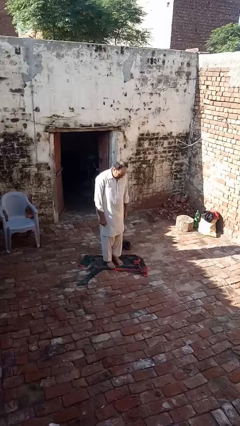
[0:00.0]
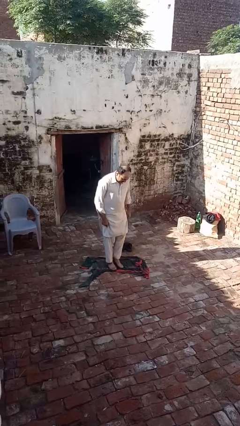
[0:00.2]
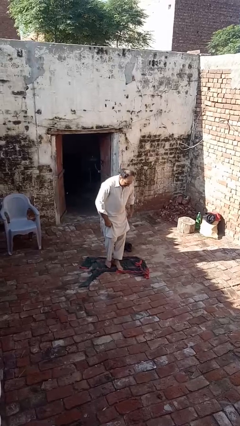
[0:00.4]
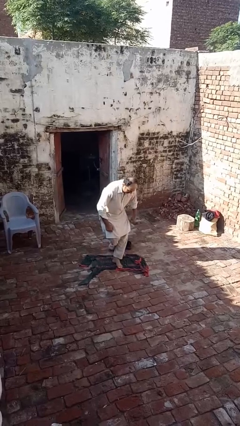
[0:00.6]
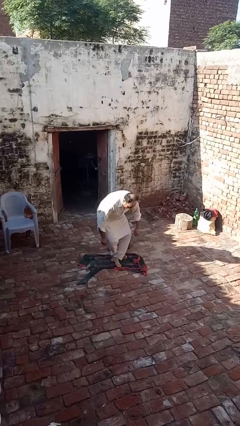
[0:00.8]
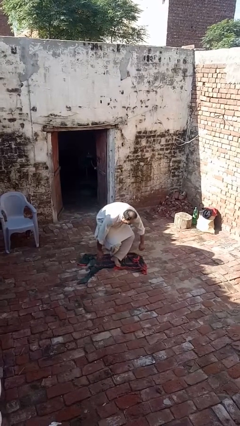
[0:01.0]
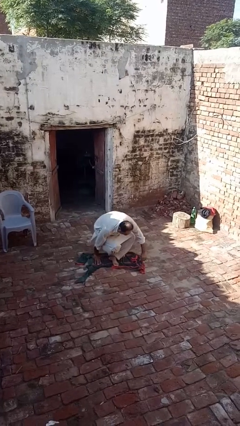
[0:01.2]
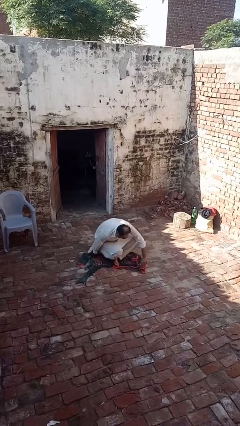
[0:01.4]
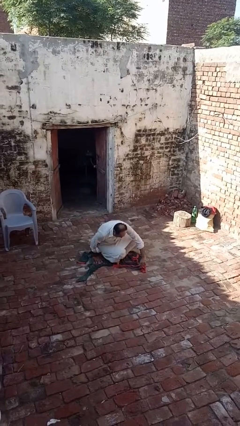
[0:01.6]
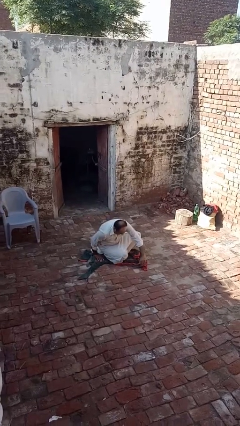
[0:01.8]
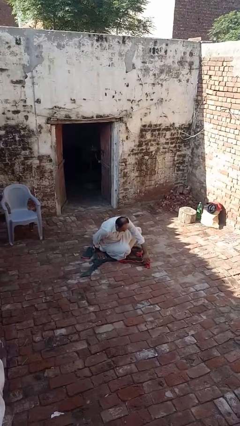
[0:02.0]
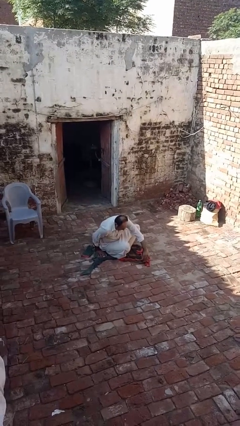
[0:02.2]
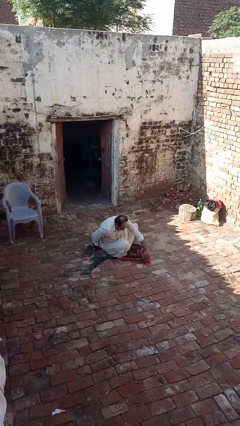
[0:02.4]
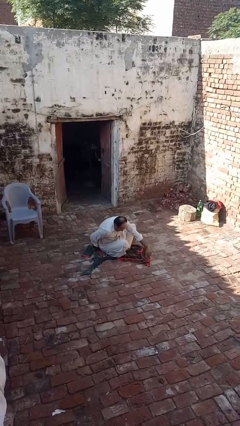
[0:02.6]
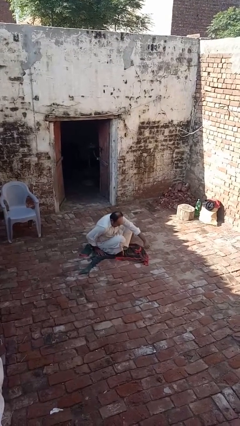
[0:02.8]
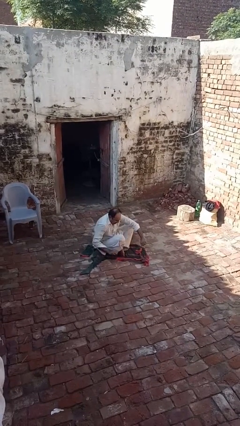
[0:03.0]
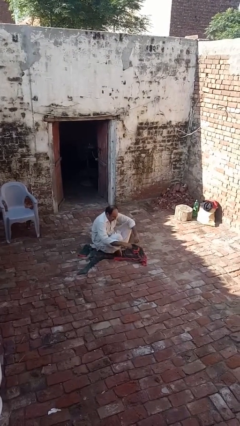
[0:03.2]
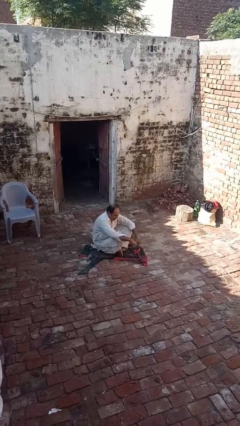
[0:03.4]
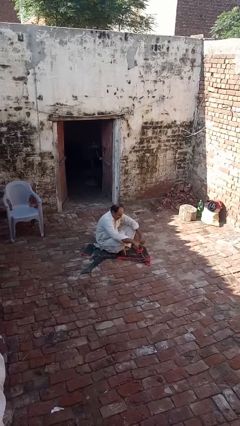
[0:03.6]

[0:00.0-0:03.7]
person sits crisscross

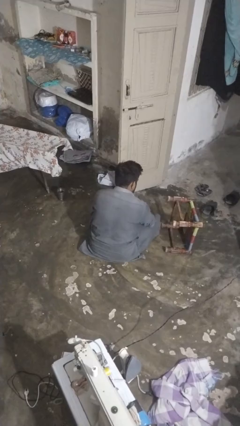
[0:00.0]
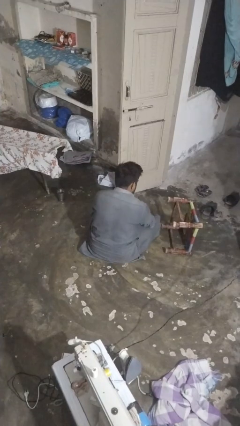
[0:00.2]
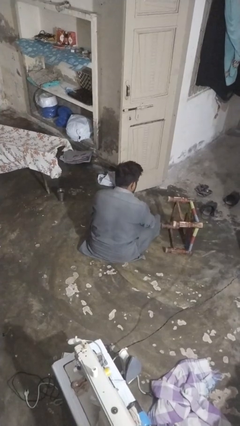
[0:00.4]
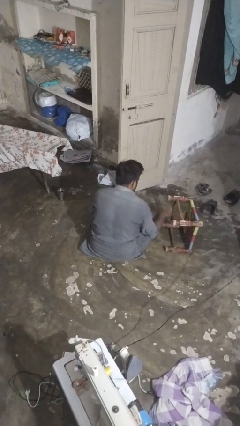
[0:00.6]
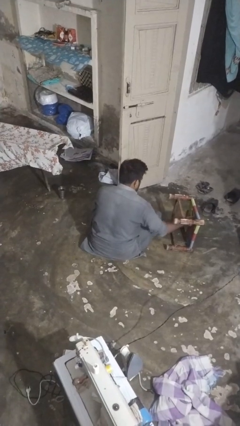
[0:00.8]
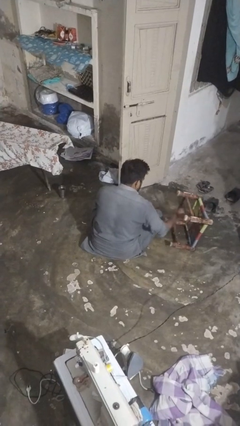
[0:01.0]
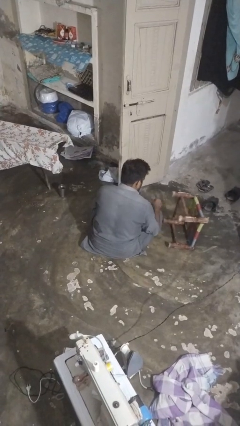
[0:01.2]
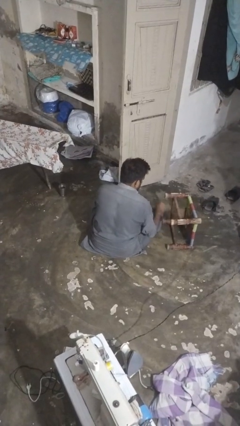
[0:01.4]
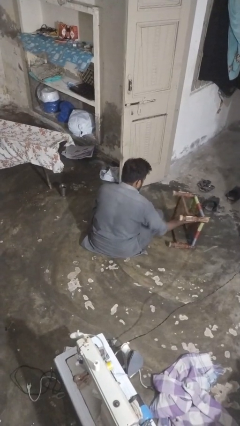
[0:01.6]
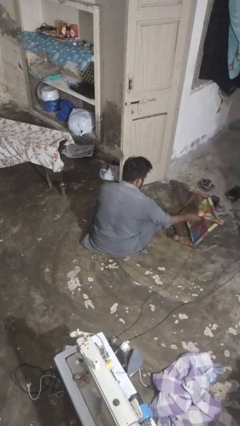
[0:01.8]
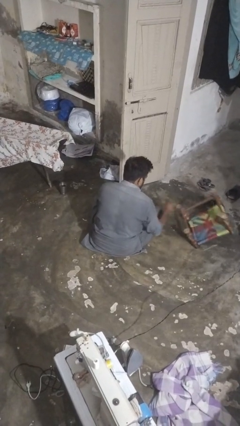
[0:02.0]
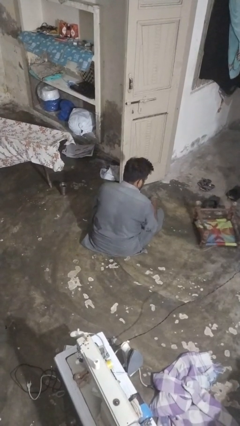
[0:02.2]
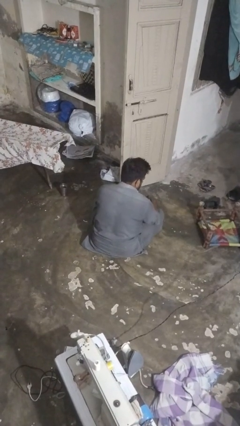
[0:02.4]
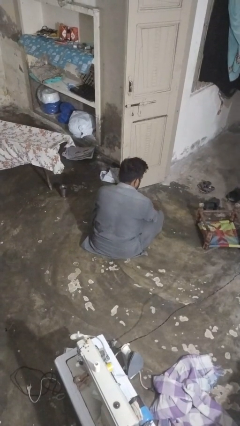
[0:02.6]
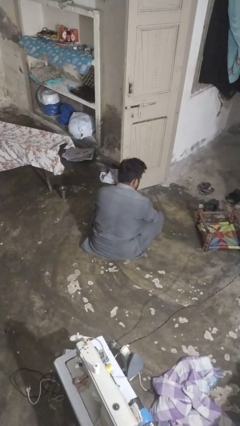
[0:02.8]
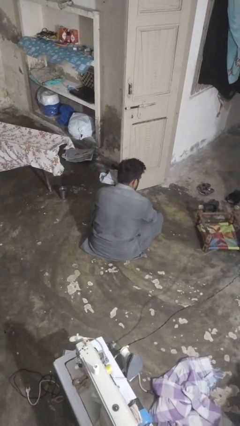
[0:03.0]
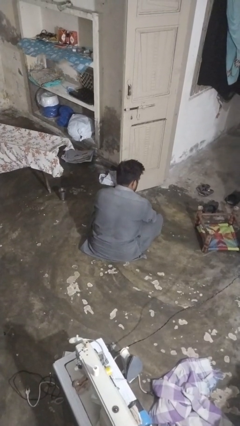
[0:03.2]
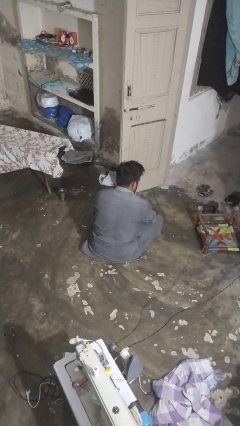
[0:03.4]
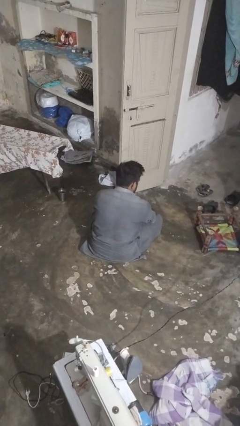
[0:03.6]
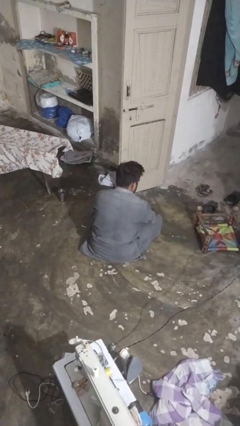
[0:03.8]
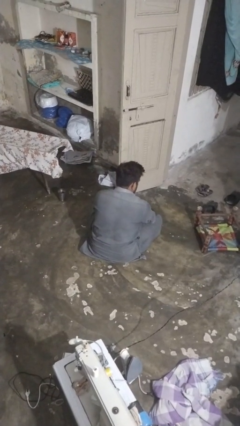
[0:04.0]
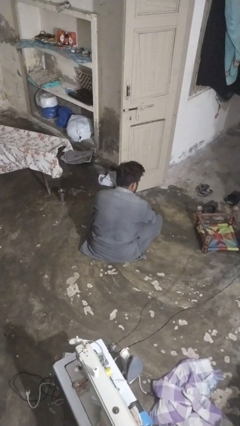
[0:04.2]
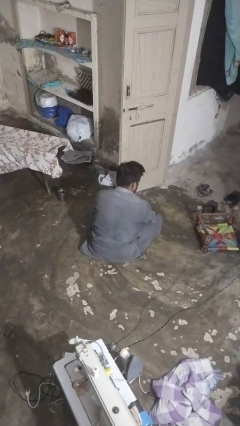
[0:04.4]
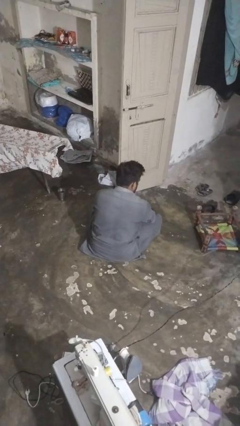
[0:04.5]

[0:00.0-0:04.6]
person knocks over furniture

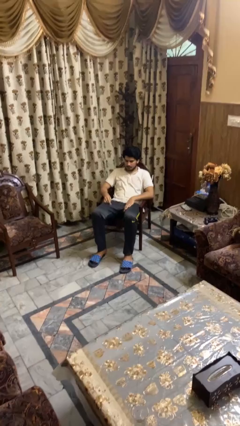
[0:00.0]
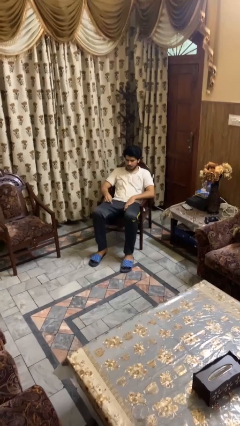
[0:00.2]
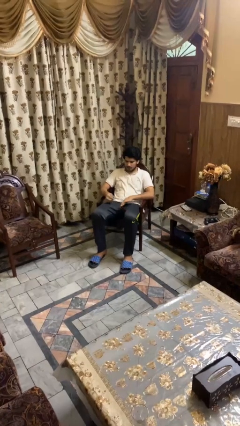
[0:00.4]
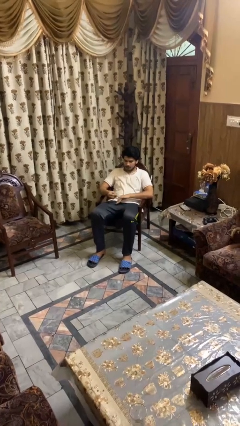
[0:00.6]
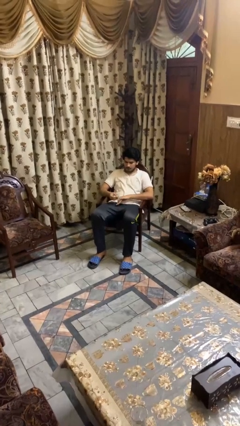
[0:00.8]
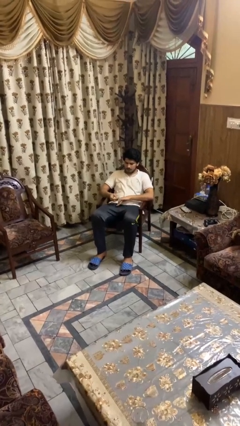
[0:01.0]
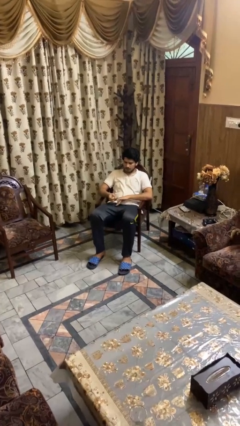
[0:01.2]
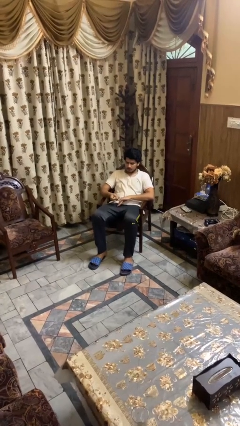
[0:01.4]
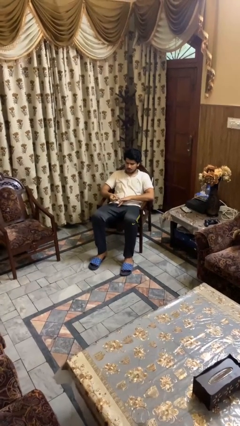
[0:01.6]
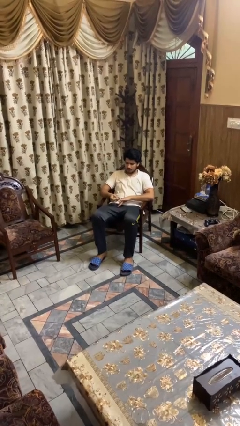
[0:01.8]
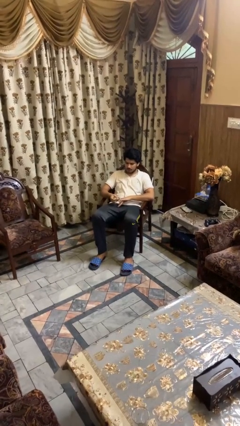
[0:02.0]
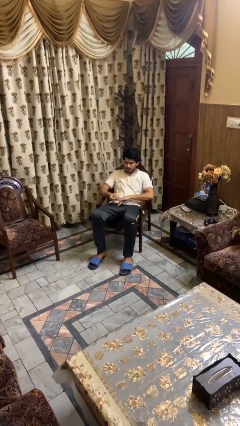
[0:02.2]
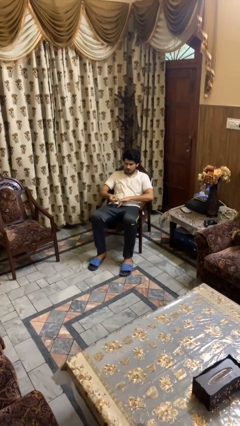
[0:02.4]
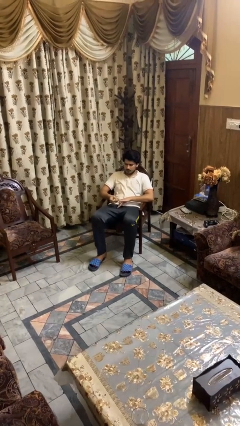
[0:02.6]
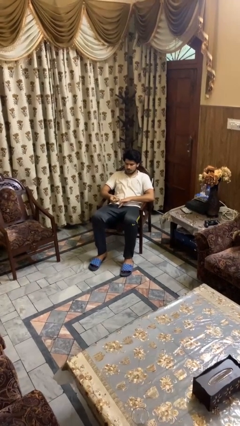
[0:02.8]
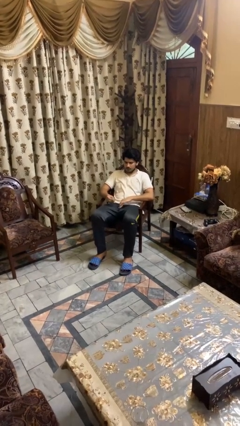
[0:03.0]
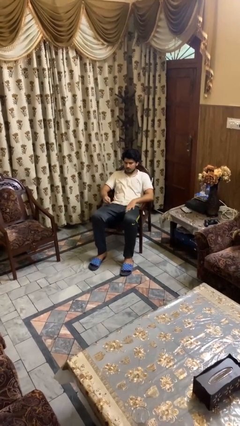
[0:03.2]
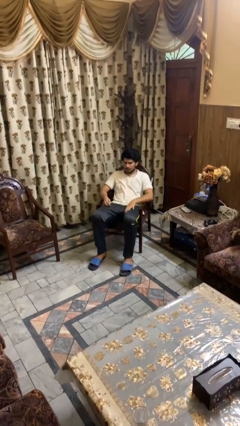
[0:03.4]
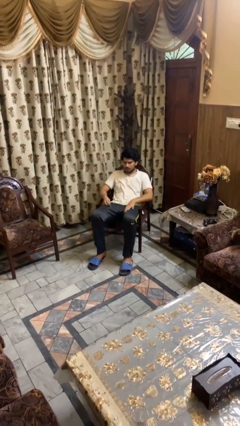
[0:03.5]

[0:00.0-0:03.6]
person files fingernails

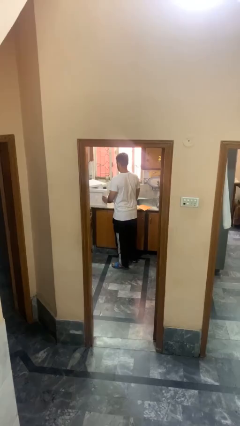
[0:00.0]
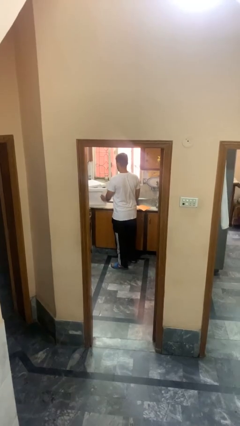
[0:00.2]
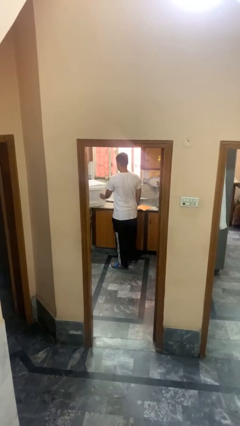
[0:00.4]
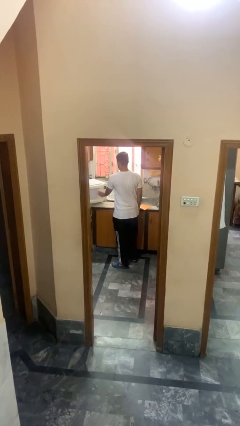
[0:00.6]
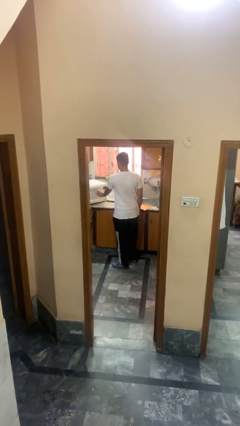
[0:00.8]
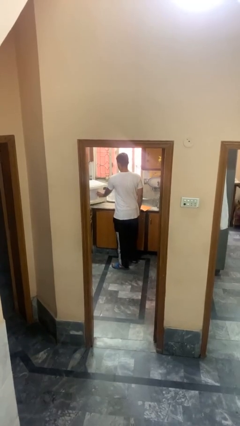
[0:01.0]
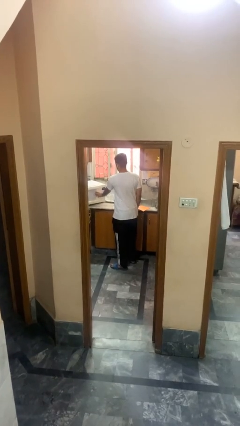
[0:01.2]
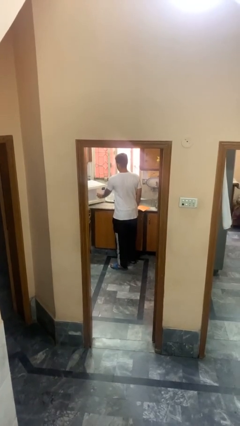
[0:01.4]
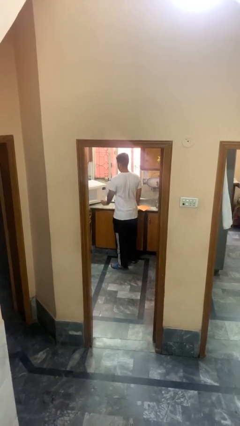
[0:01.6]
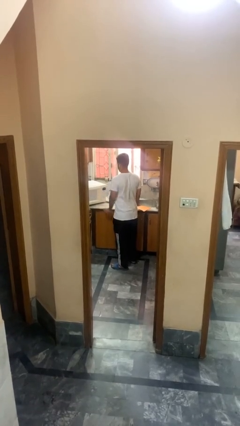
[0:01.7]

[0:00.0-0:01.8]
person closes microwave

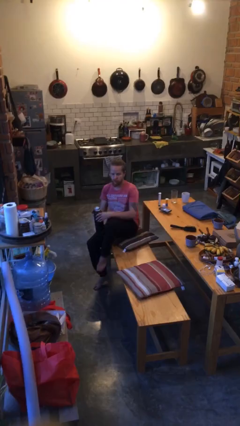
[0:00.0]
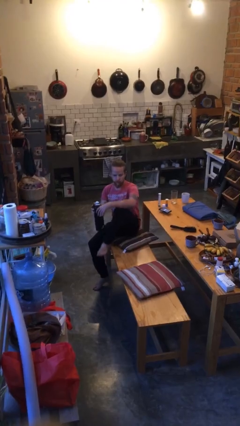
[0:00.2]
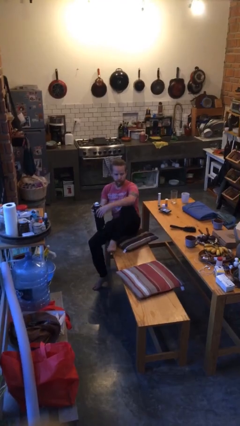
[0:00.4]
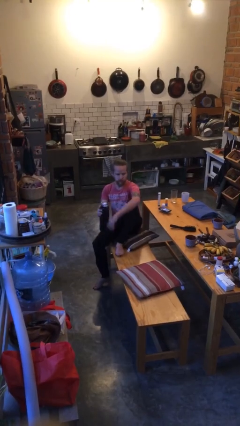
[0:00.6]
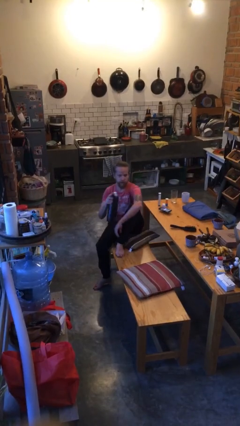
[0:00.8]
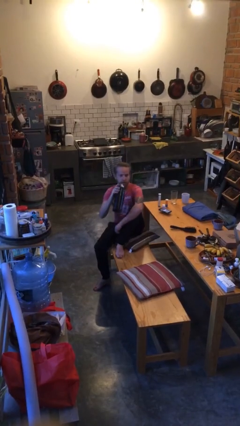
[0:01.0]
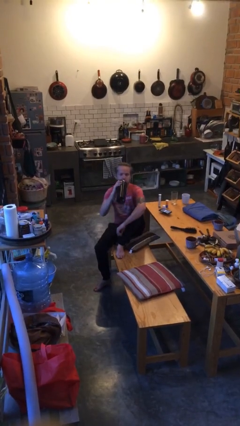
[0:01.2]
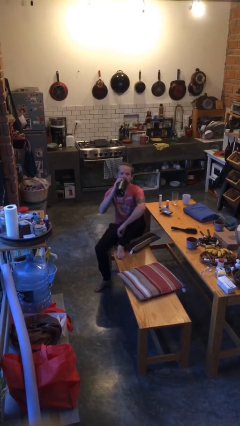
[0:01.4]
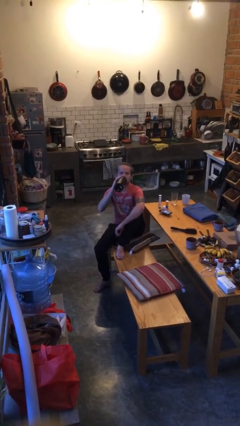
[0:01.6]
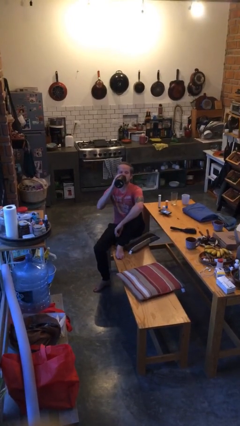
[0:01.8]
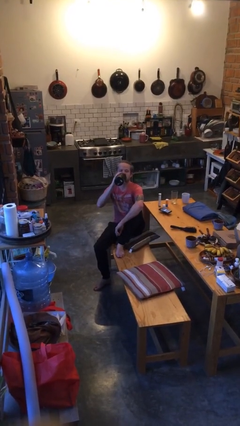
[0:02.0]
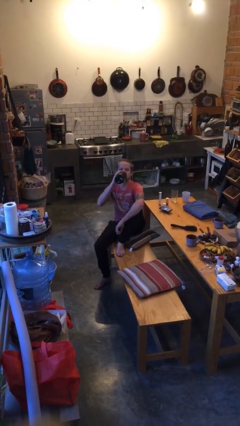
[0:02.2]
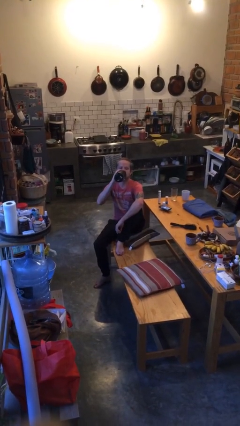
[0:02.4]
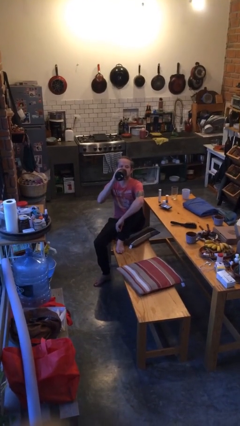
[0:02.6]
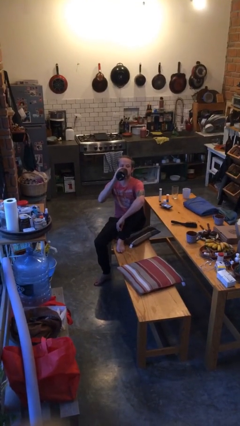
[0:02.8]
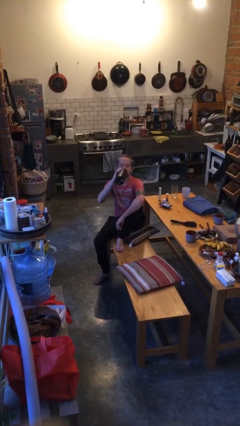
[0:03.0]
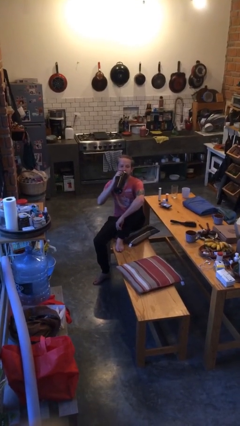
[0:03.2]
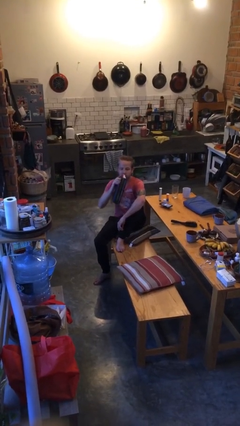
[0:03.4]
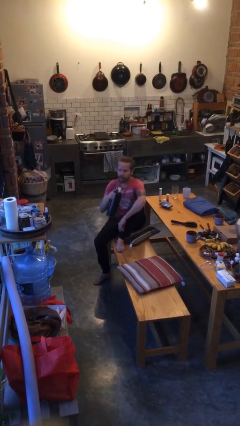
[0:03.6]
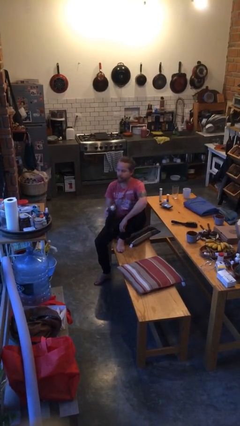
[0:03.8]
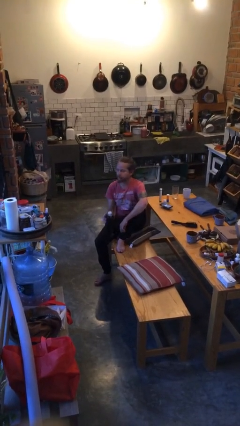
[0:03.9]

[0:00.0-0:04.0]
person drinks from bottle
